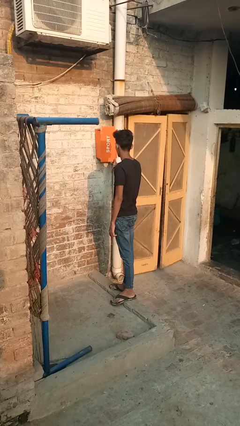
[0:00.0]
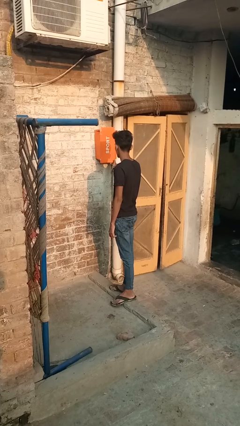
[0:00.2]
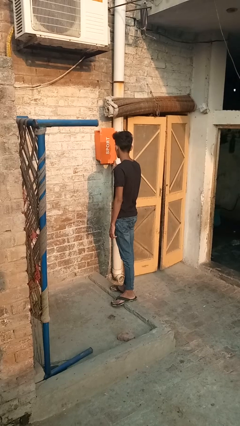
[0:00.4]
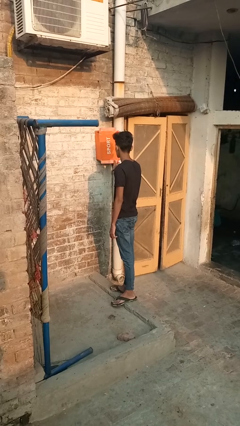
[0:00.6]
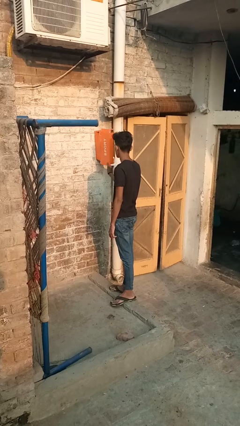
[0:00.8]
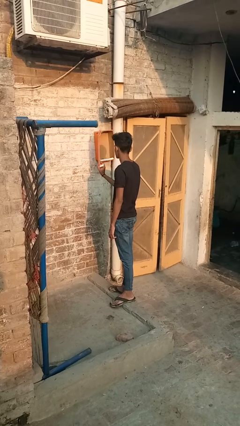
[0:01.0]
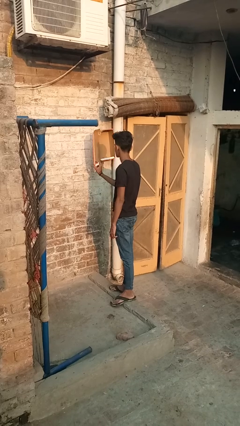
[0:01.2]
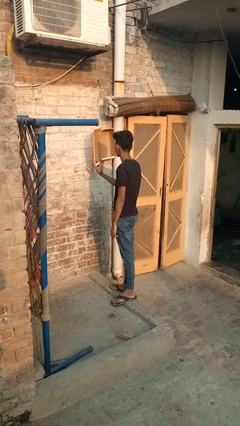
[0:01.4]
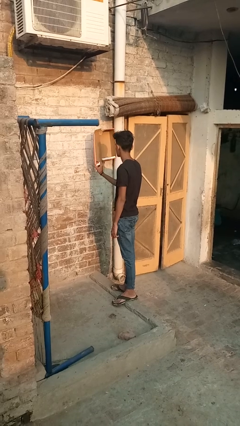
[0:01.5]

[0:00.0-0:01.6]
person closes mailbox

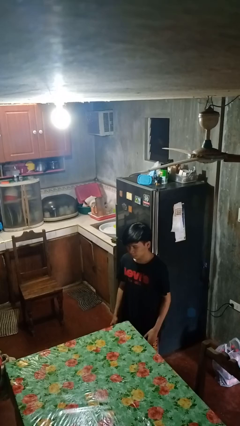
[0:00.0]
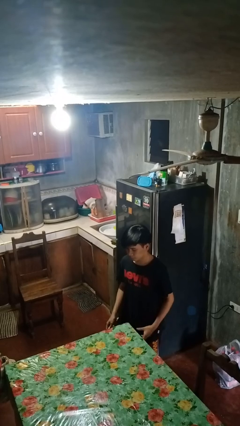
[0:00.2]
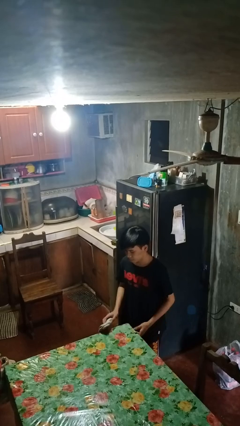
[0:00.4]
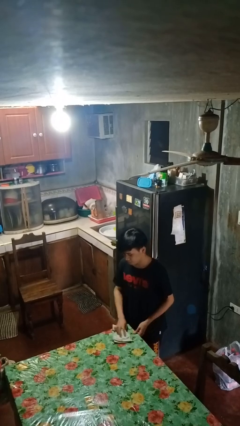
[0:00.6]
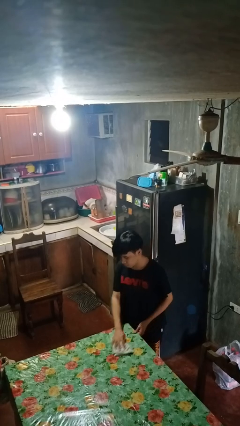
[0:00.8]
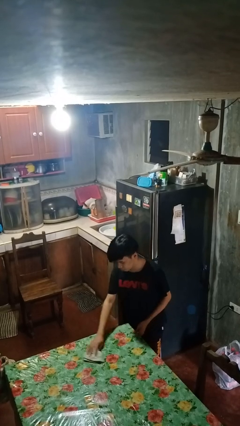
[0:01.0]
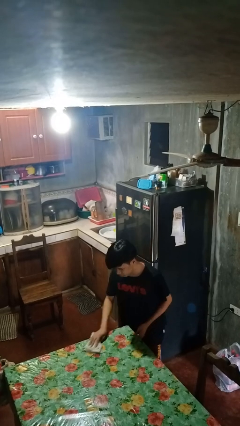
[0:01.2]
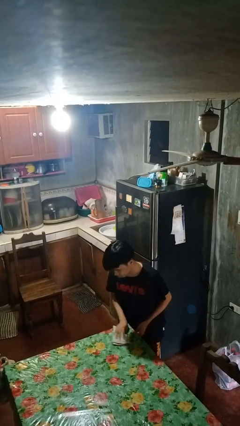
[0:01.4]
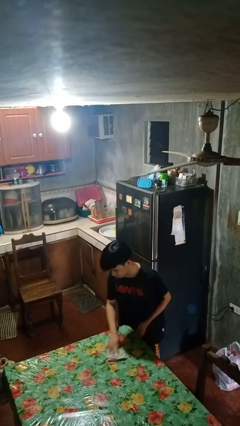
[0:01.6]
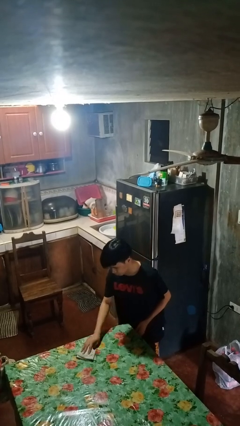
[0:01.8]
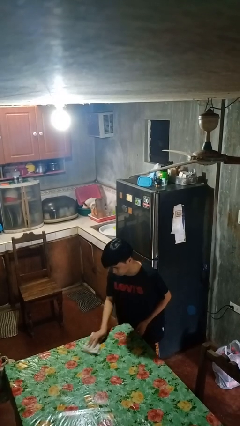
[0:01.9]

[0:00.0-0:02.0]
person cleans table with rag

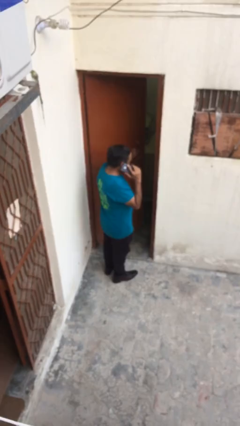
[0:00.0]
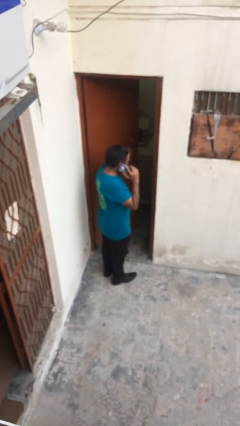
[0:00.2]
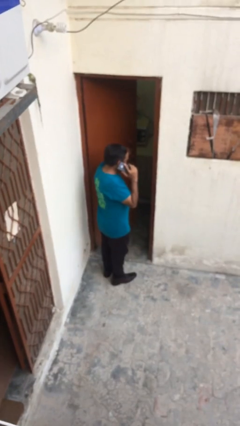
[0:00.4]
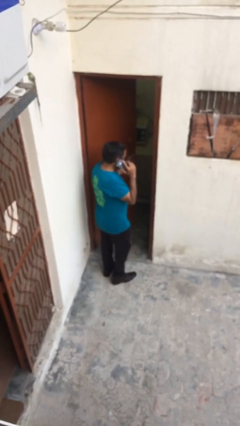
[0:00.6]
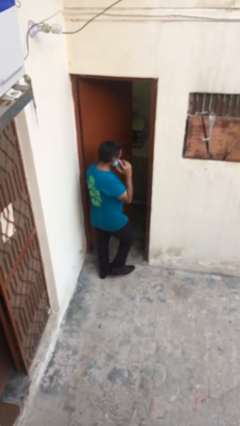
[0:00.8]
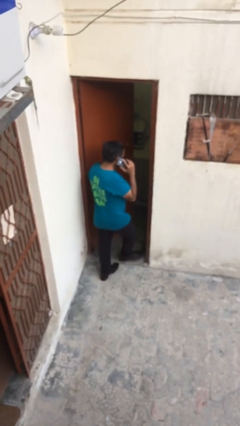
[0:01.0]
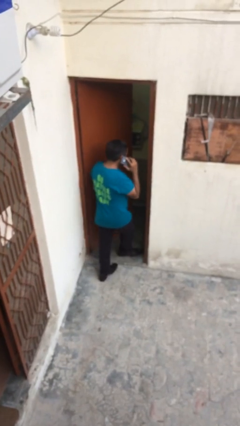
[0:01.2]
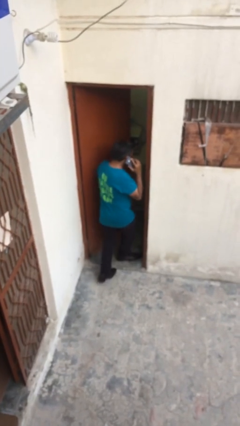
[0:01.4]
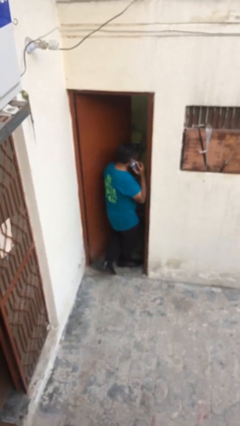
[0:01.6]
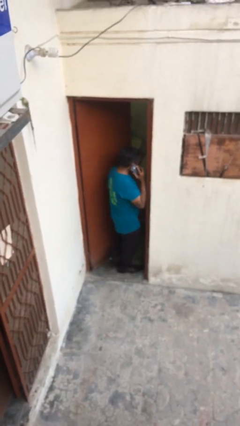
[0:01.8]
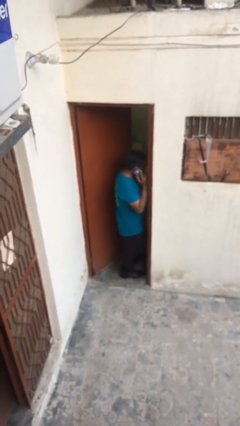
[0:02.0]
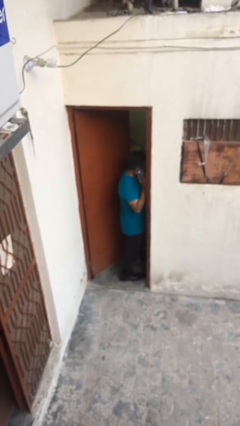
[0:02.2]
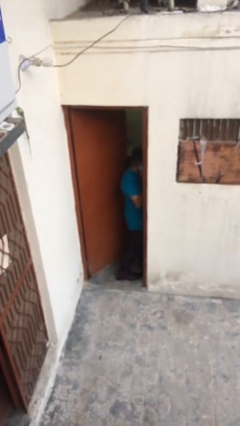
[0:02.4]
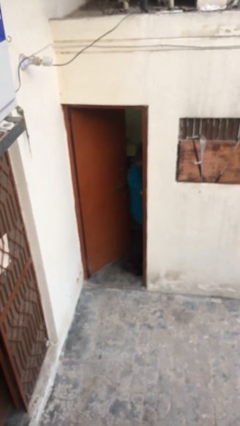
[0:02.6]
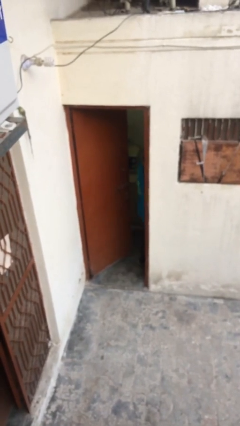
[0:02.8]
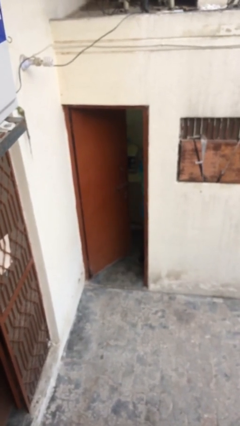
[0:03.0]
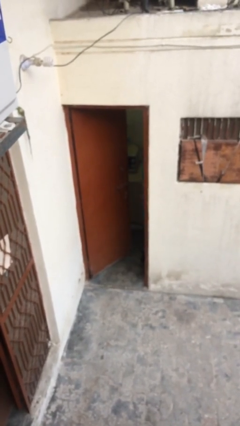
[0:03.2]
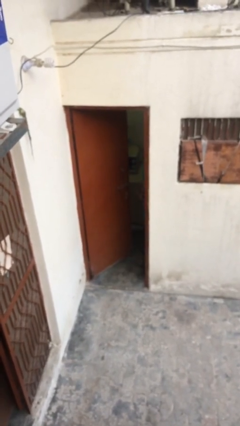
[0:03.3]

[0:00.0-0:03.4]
person exits scene through structure

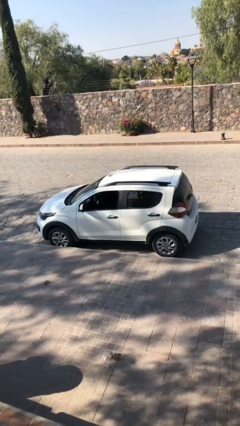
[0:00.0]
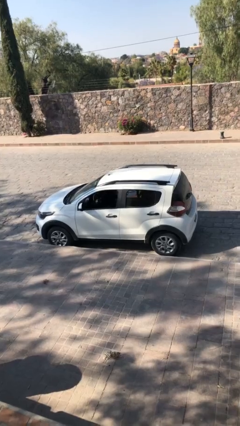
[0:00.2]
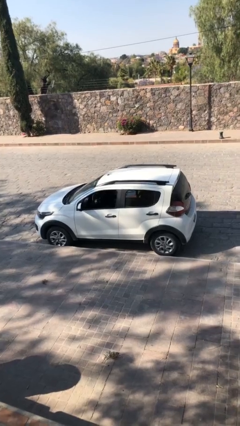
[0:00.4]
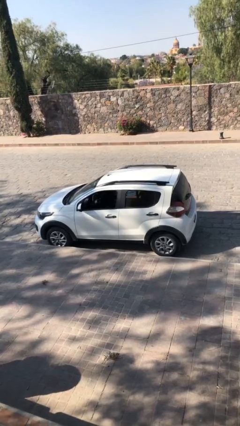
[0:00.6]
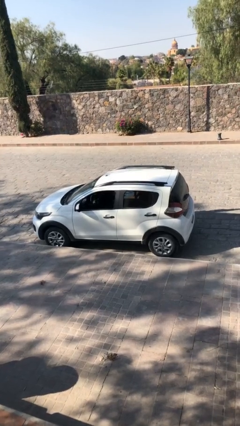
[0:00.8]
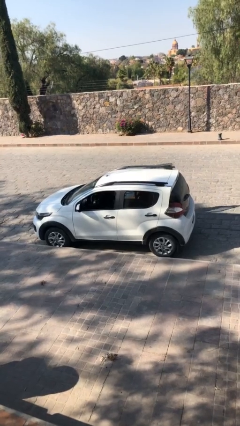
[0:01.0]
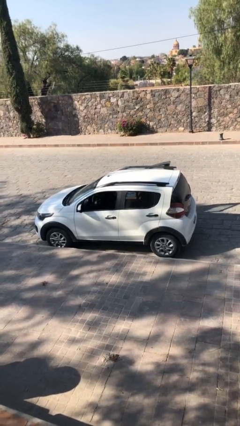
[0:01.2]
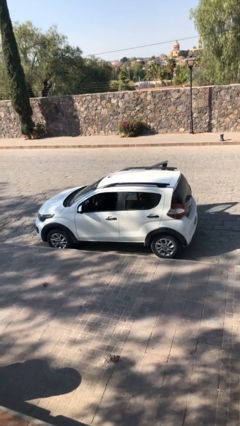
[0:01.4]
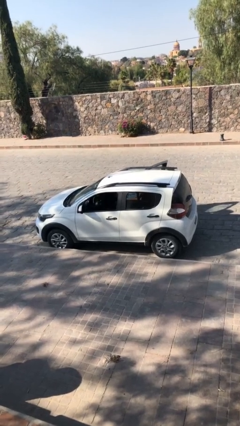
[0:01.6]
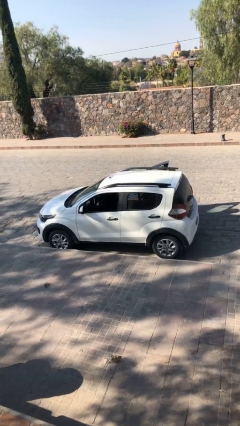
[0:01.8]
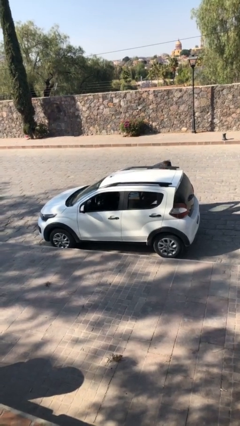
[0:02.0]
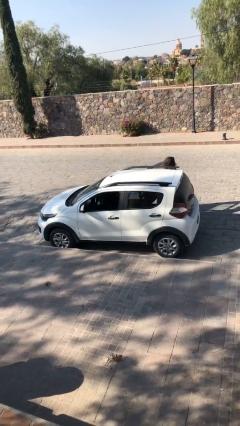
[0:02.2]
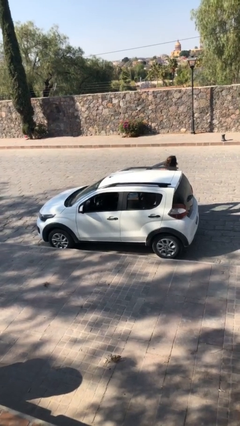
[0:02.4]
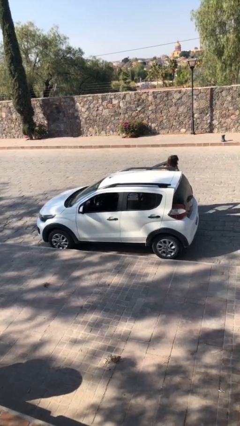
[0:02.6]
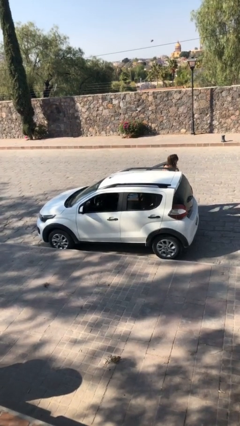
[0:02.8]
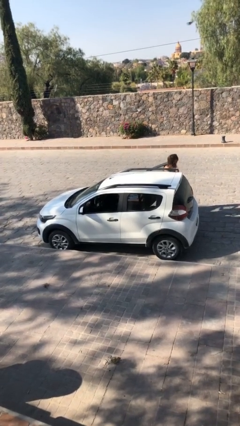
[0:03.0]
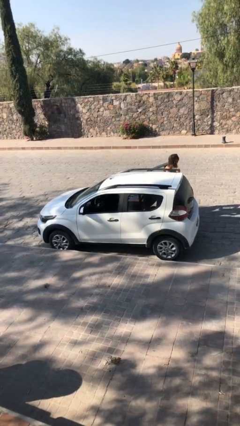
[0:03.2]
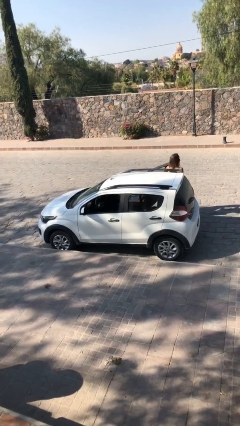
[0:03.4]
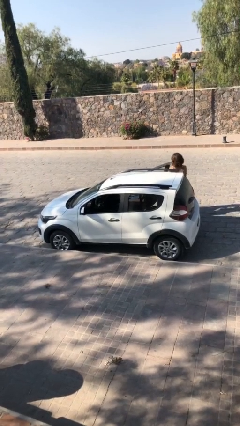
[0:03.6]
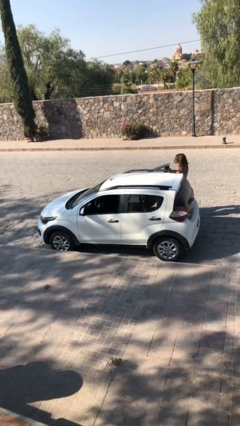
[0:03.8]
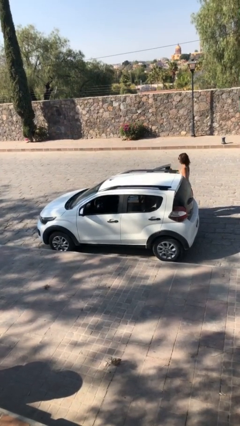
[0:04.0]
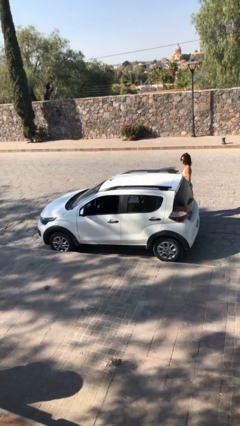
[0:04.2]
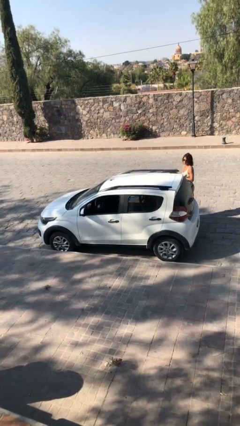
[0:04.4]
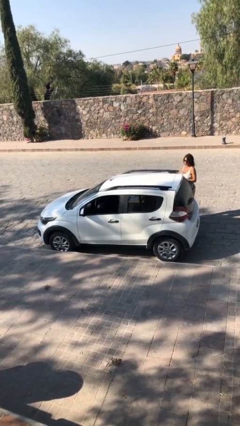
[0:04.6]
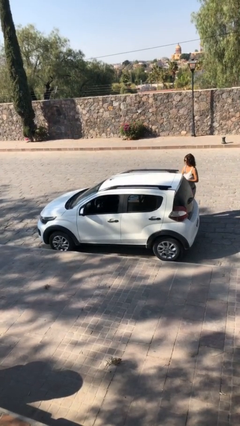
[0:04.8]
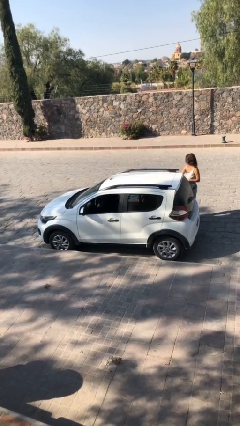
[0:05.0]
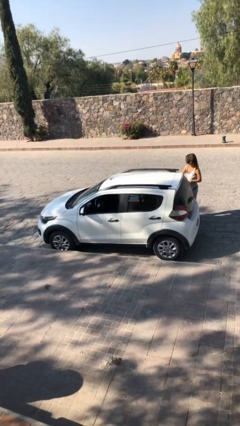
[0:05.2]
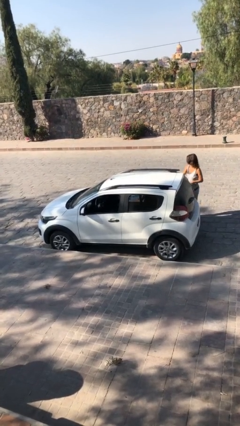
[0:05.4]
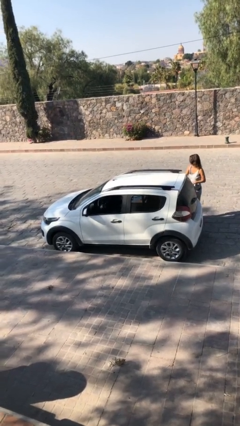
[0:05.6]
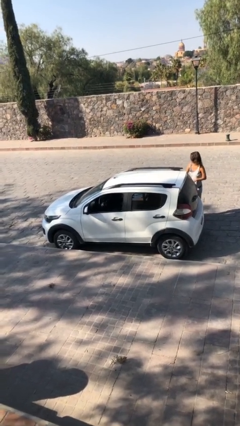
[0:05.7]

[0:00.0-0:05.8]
car drops off person

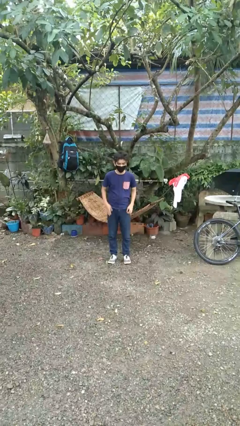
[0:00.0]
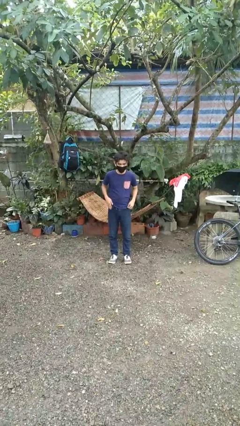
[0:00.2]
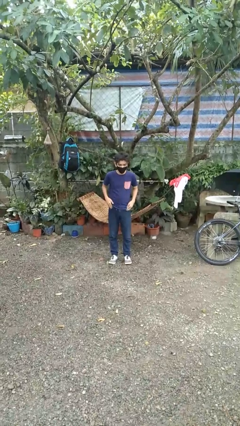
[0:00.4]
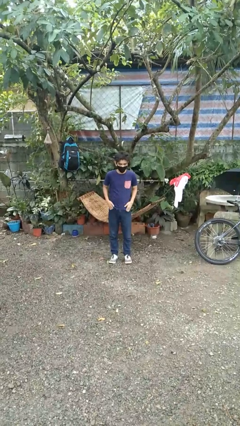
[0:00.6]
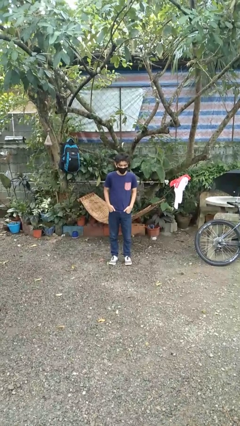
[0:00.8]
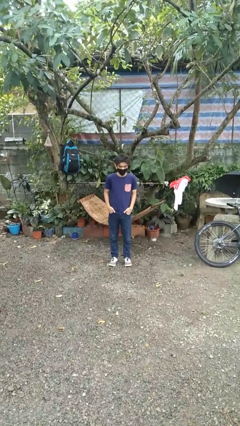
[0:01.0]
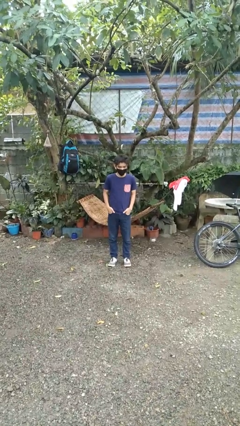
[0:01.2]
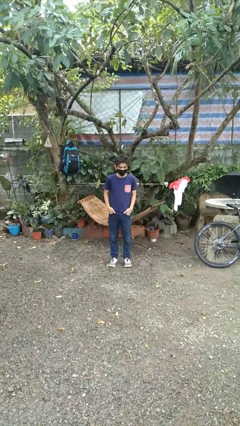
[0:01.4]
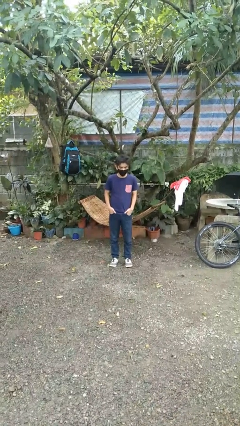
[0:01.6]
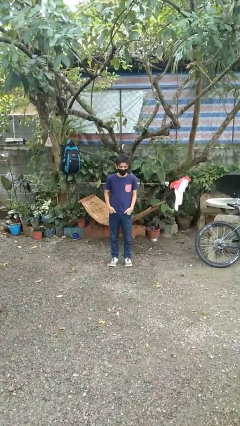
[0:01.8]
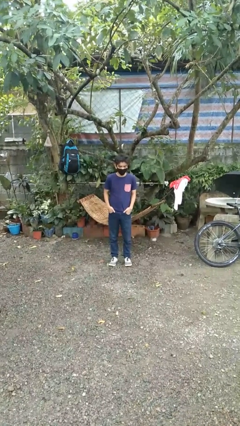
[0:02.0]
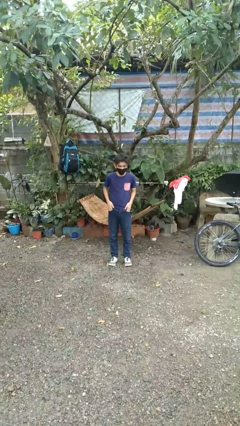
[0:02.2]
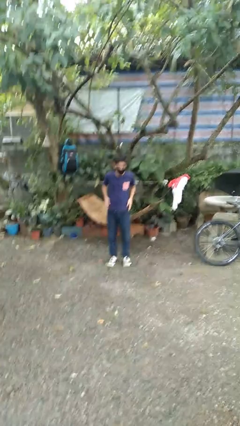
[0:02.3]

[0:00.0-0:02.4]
person puts hands in back pockets

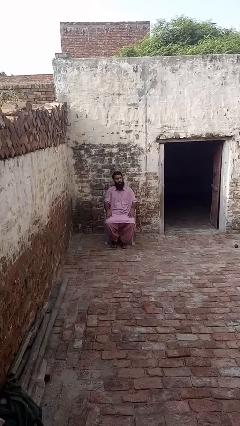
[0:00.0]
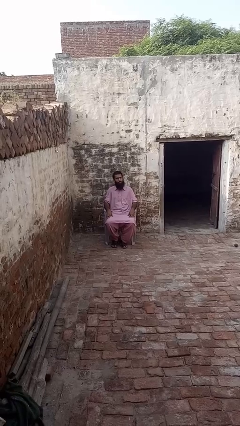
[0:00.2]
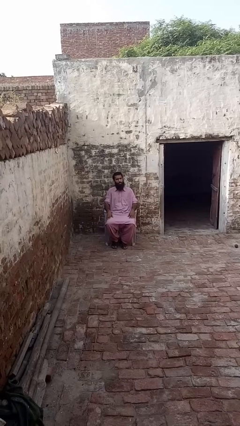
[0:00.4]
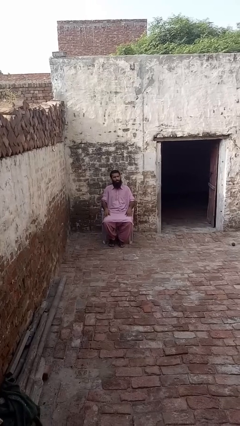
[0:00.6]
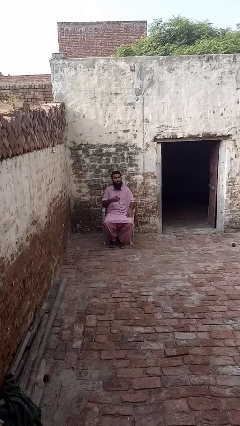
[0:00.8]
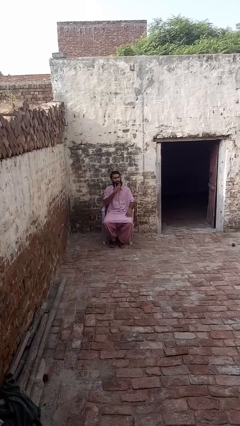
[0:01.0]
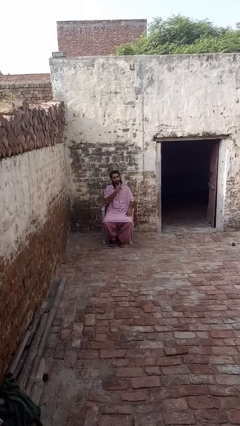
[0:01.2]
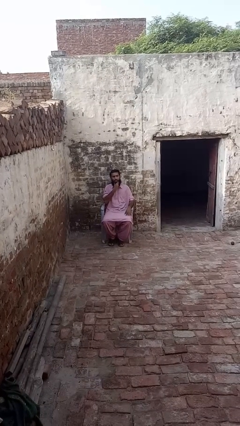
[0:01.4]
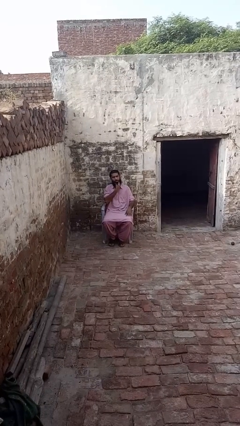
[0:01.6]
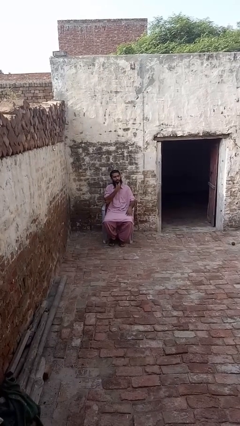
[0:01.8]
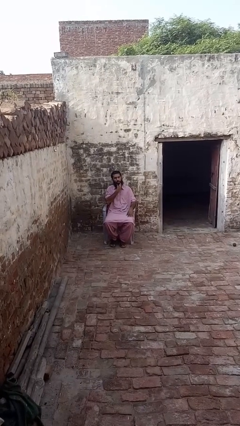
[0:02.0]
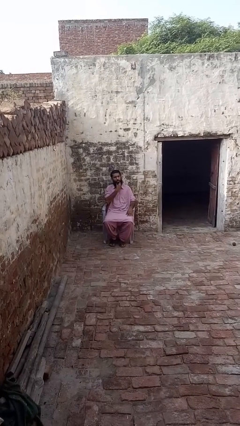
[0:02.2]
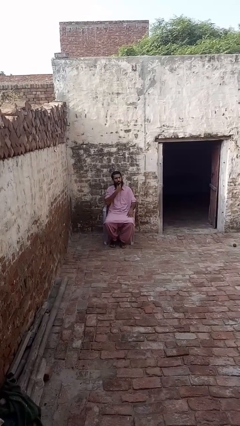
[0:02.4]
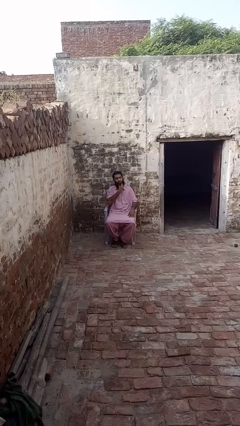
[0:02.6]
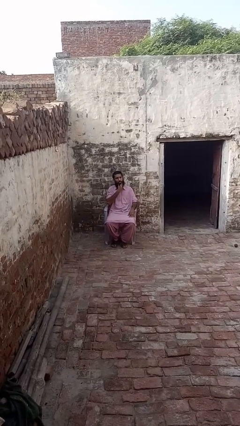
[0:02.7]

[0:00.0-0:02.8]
person strokes chin
